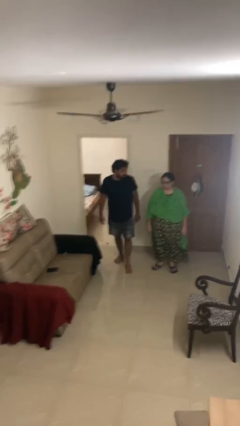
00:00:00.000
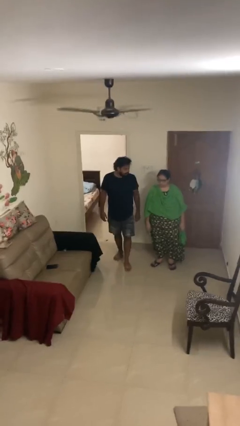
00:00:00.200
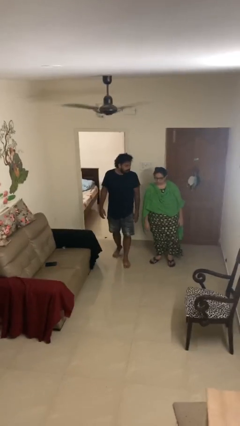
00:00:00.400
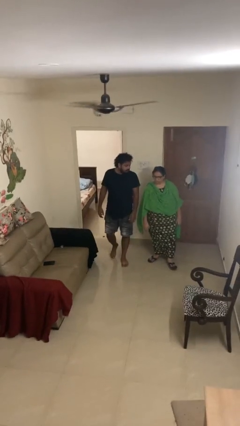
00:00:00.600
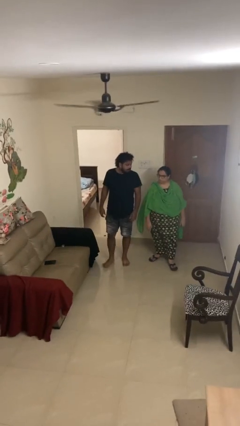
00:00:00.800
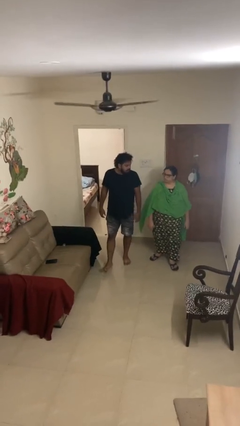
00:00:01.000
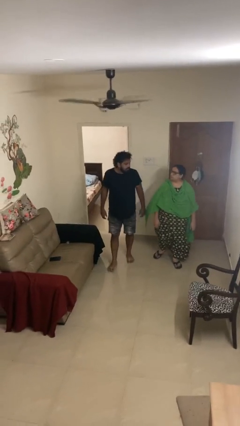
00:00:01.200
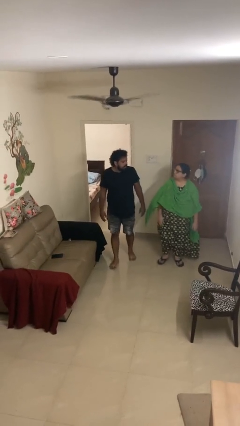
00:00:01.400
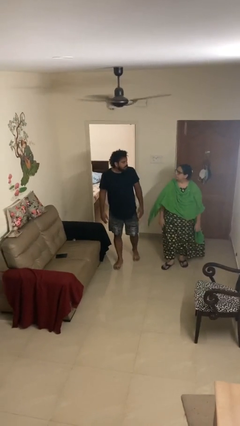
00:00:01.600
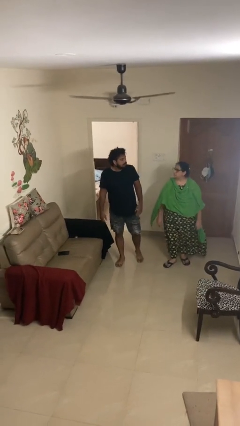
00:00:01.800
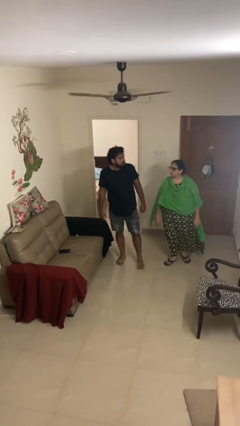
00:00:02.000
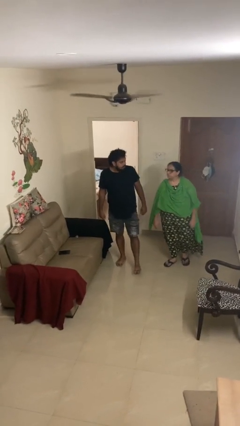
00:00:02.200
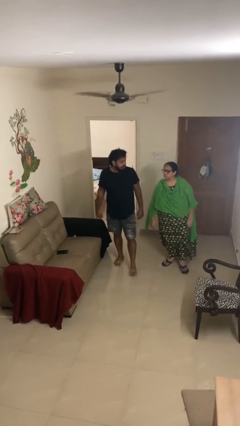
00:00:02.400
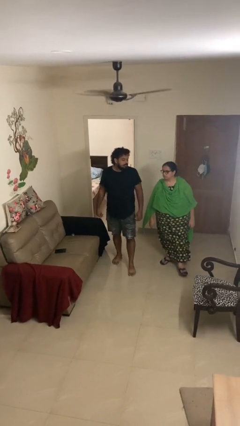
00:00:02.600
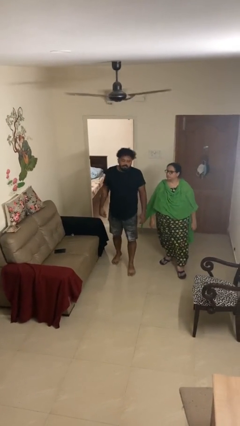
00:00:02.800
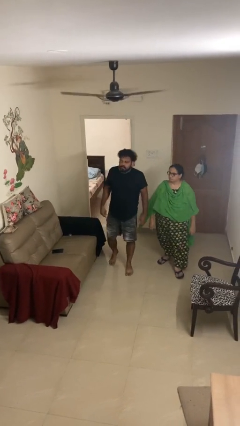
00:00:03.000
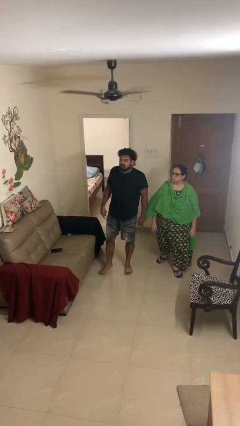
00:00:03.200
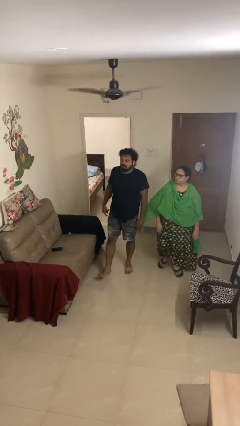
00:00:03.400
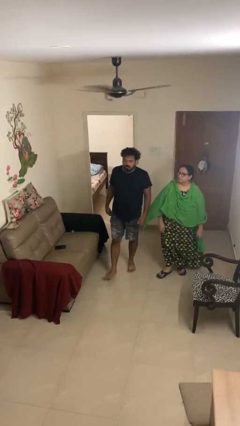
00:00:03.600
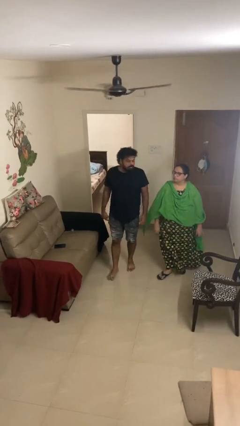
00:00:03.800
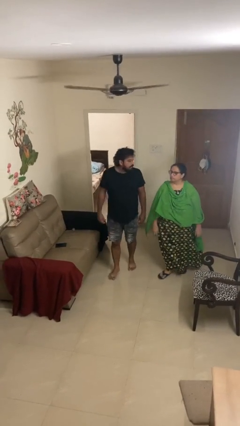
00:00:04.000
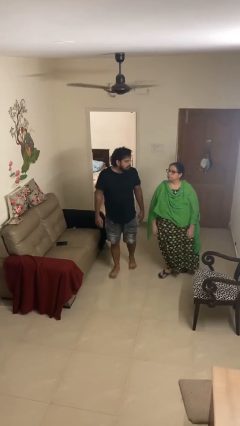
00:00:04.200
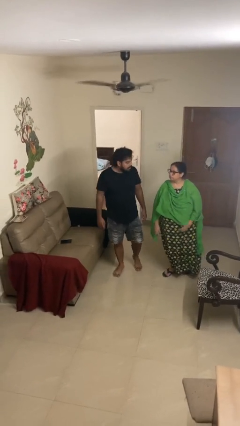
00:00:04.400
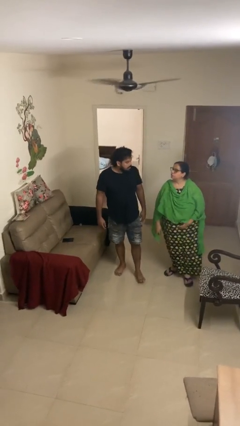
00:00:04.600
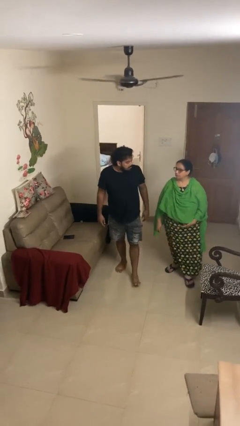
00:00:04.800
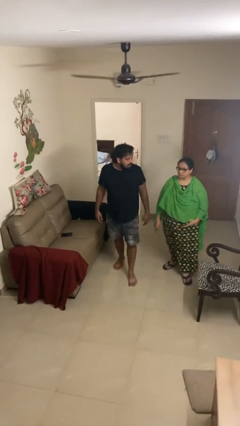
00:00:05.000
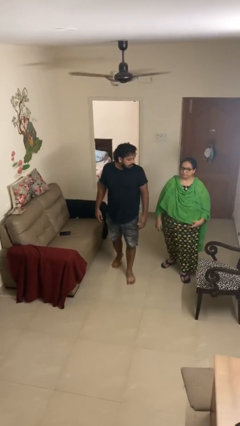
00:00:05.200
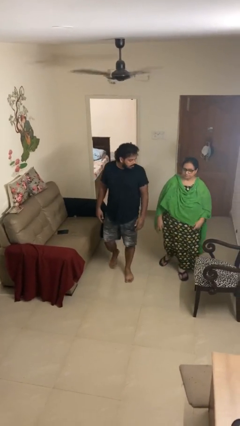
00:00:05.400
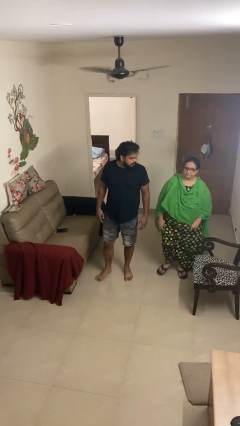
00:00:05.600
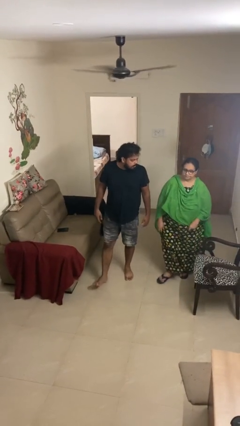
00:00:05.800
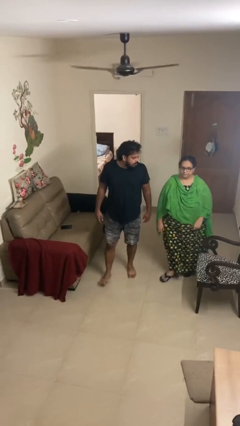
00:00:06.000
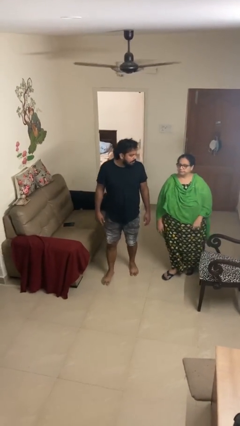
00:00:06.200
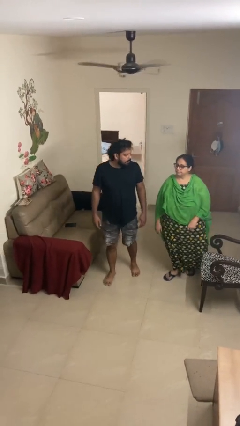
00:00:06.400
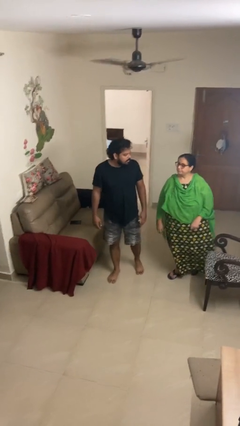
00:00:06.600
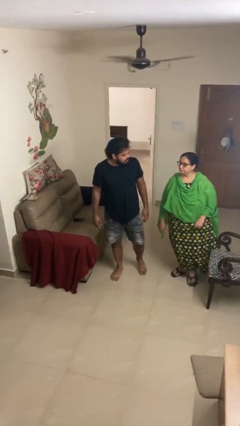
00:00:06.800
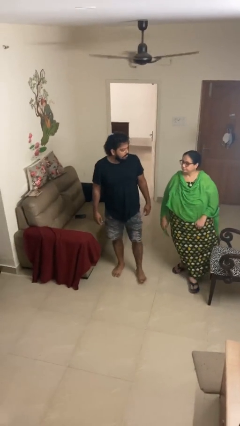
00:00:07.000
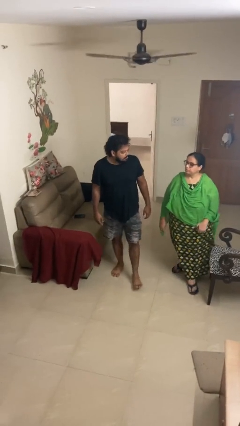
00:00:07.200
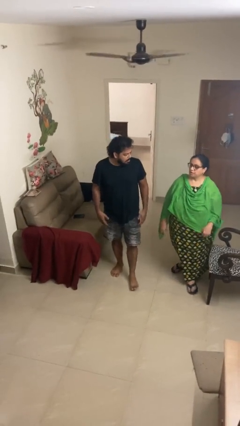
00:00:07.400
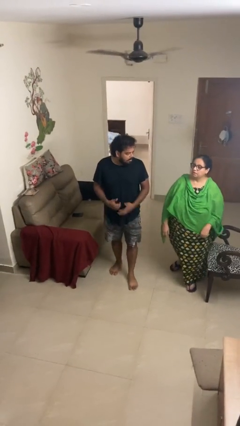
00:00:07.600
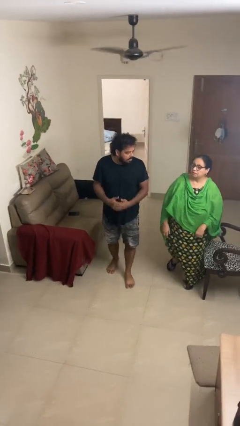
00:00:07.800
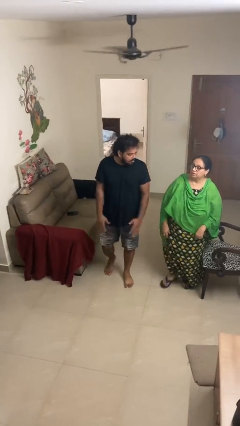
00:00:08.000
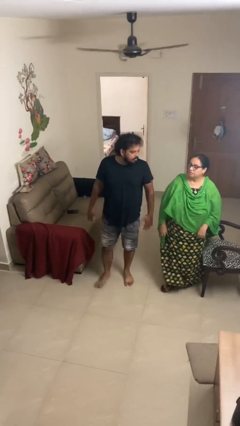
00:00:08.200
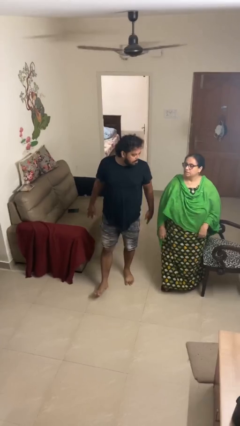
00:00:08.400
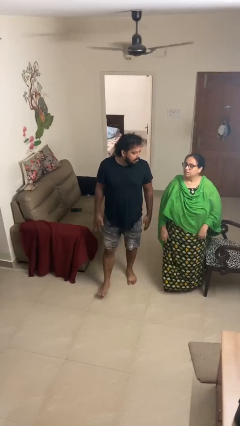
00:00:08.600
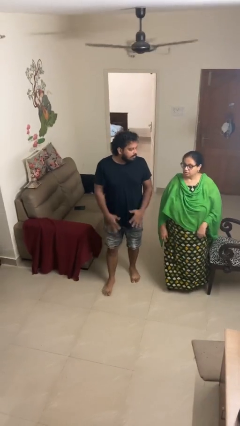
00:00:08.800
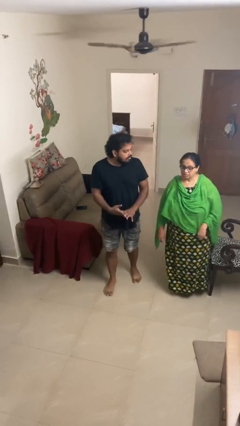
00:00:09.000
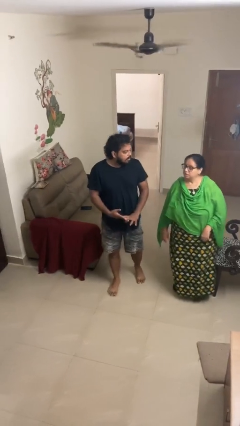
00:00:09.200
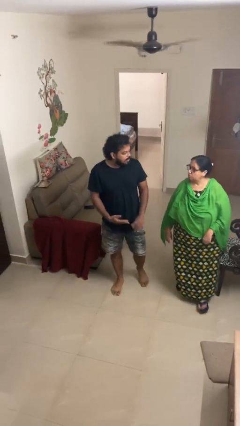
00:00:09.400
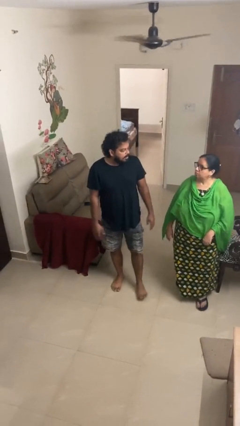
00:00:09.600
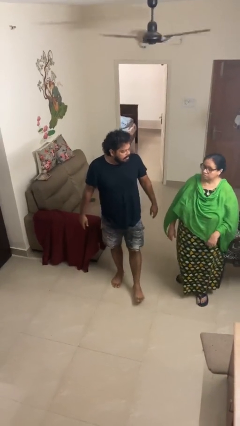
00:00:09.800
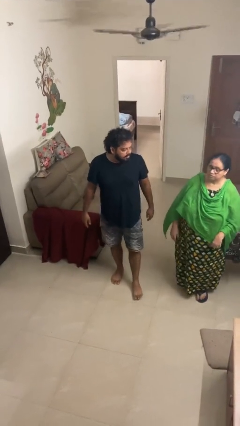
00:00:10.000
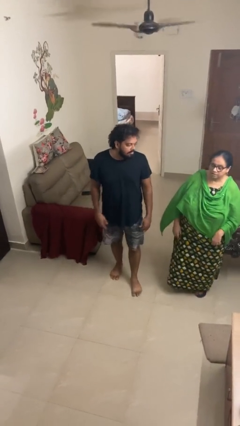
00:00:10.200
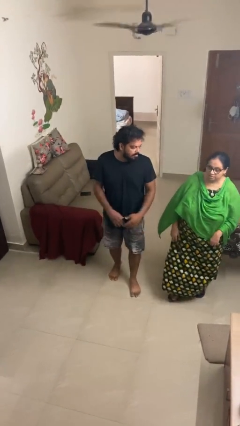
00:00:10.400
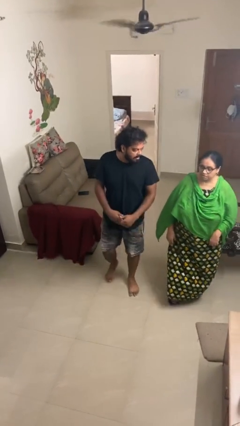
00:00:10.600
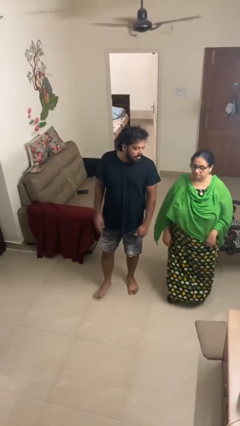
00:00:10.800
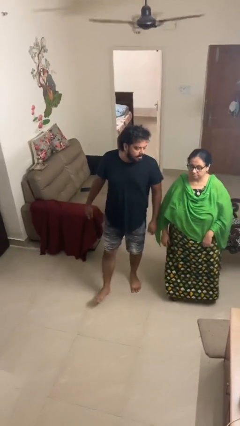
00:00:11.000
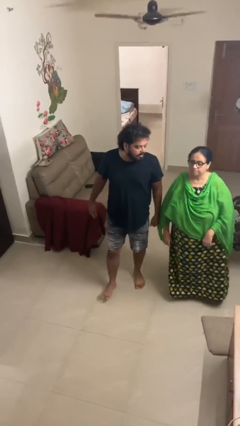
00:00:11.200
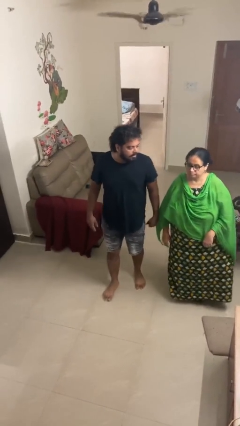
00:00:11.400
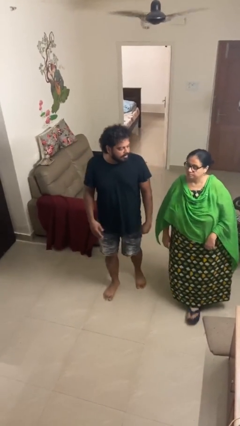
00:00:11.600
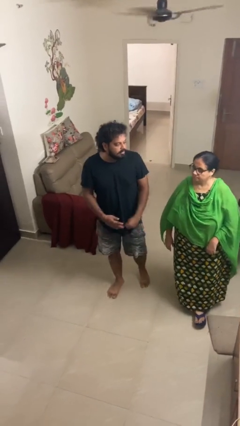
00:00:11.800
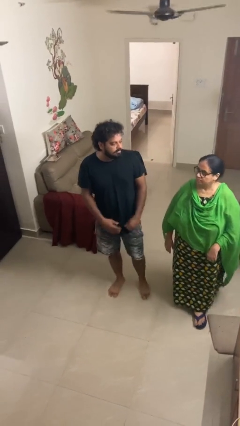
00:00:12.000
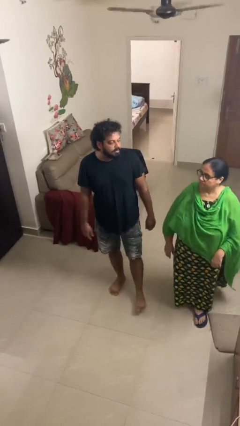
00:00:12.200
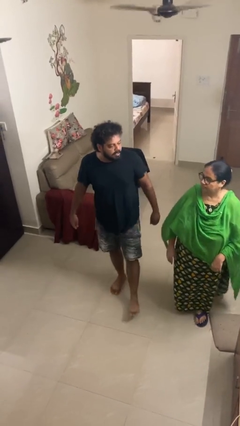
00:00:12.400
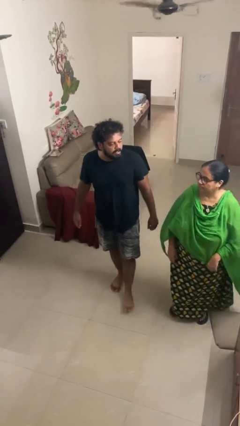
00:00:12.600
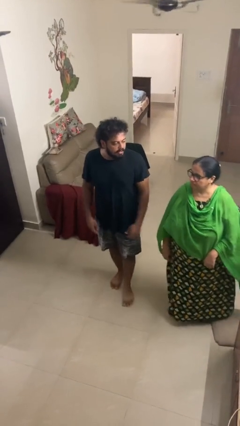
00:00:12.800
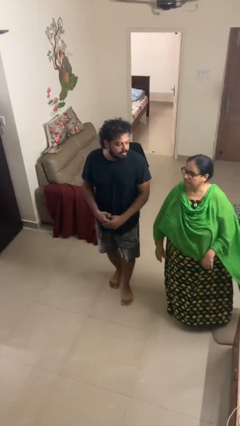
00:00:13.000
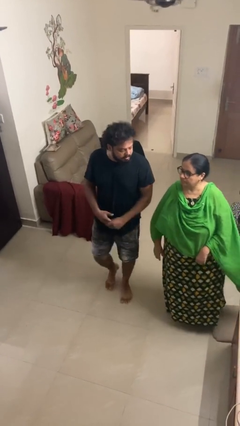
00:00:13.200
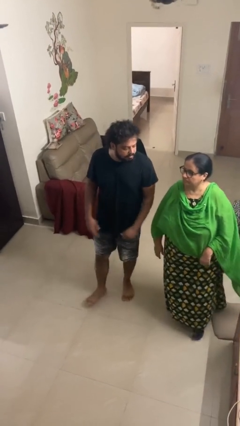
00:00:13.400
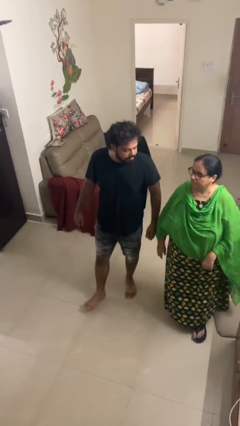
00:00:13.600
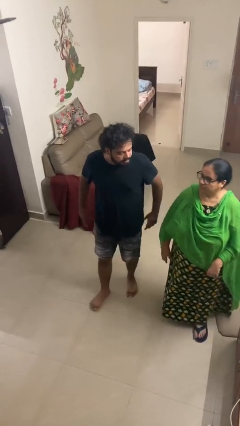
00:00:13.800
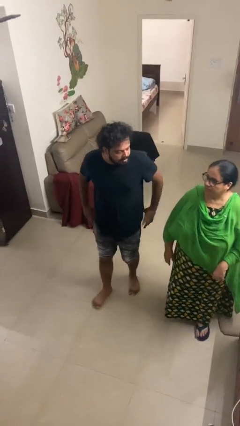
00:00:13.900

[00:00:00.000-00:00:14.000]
person talks to person

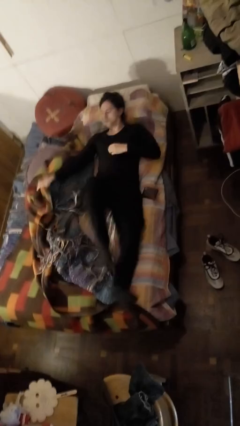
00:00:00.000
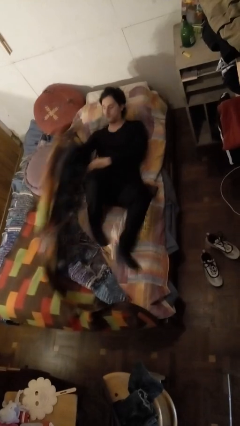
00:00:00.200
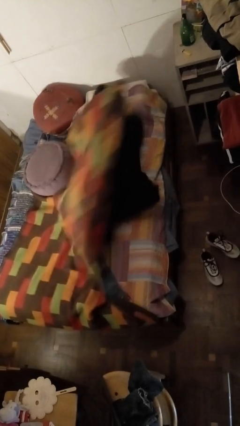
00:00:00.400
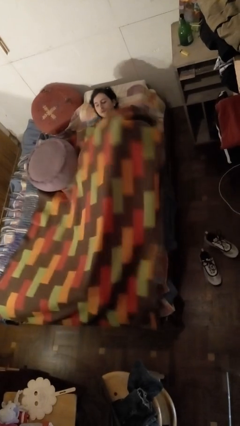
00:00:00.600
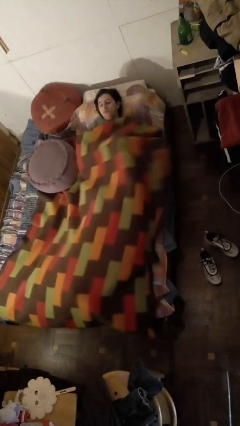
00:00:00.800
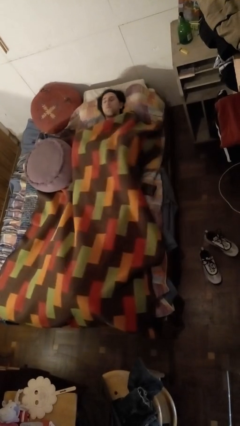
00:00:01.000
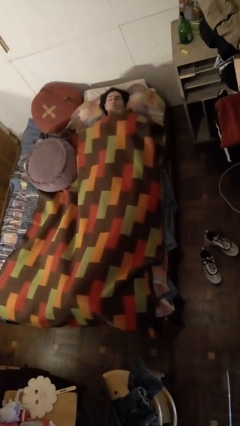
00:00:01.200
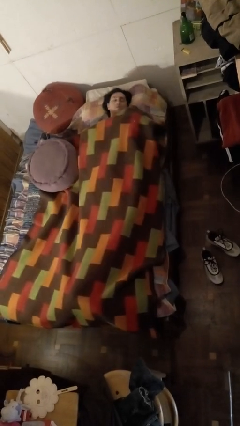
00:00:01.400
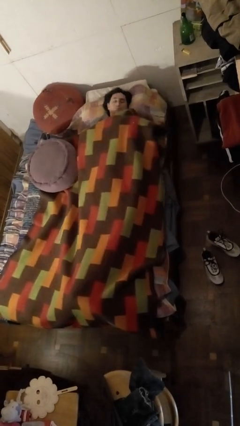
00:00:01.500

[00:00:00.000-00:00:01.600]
person covers with bedsheets

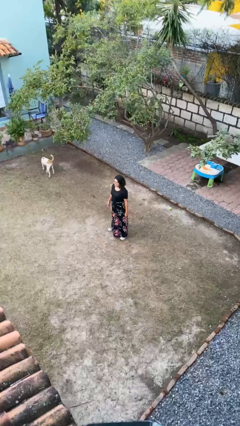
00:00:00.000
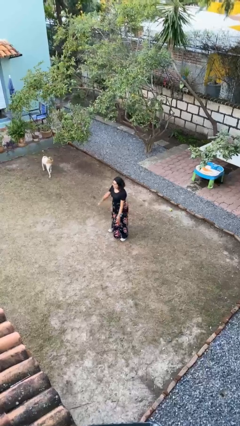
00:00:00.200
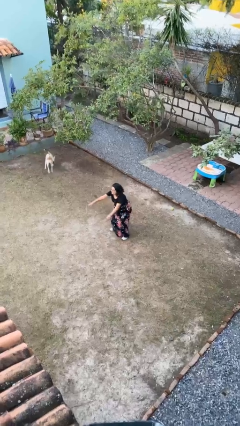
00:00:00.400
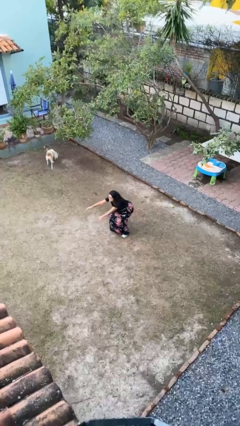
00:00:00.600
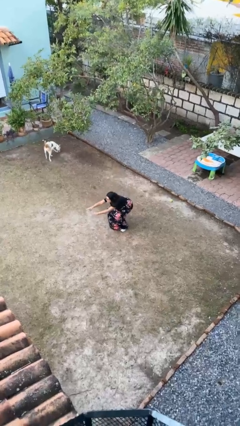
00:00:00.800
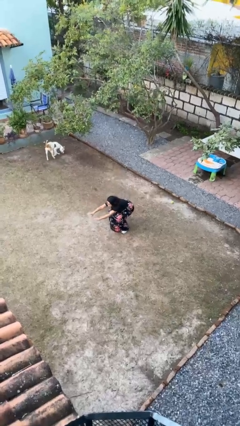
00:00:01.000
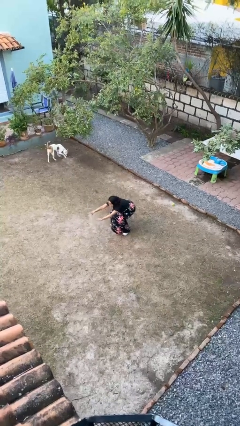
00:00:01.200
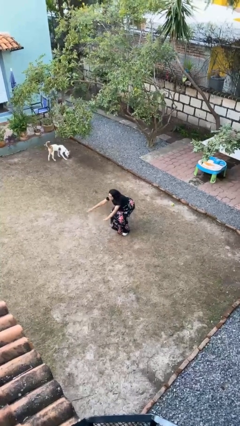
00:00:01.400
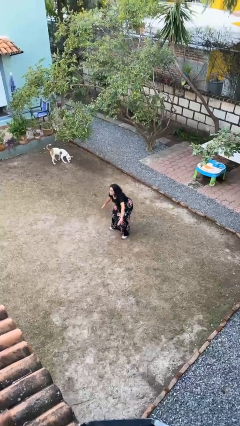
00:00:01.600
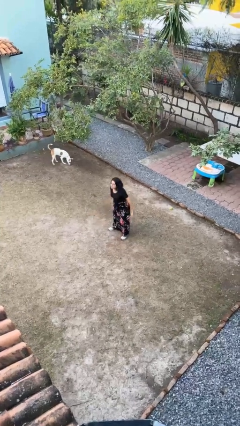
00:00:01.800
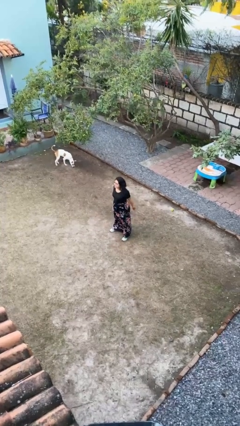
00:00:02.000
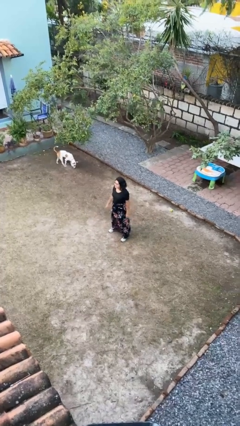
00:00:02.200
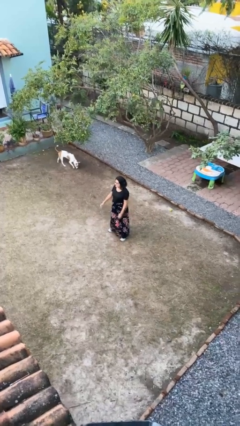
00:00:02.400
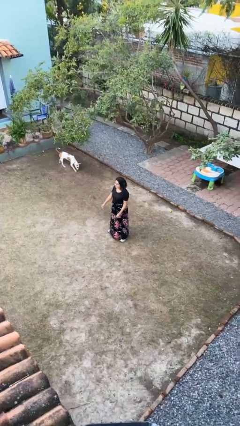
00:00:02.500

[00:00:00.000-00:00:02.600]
person exercises with situp
